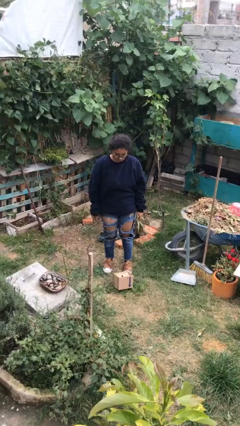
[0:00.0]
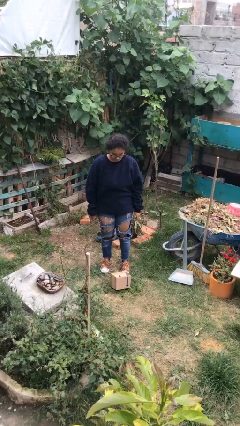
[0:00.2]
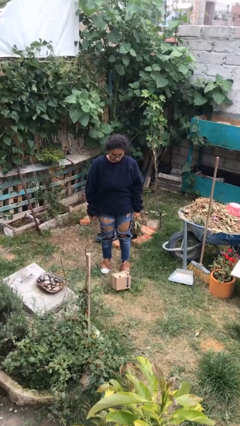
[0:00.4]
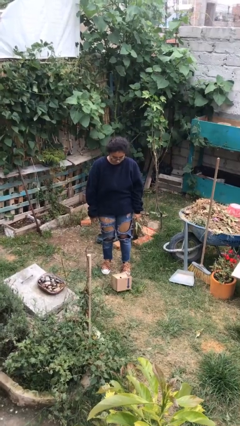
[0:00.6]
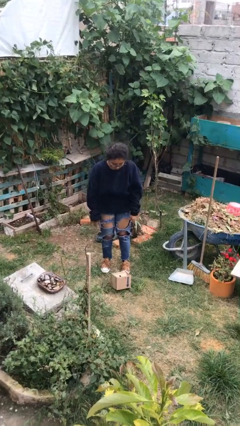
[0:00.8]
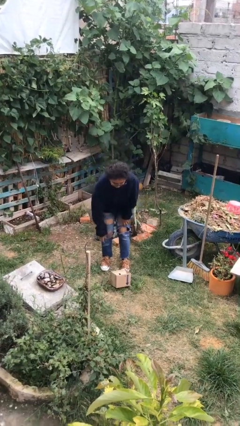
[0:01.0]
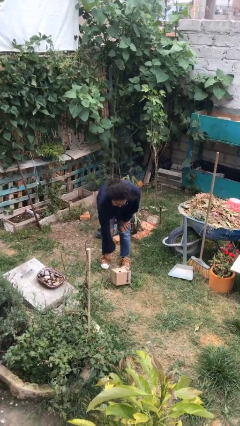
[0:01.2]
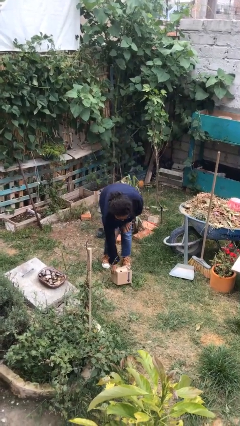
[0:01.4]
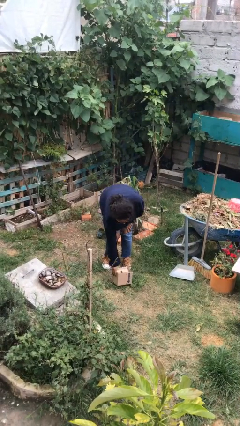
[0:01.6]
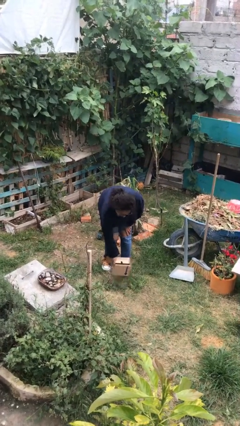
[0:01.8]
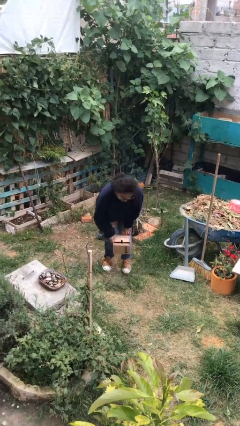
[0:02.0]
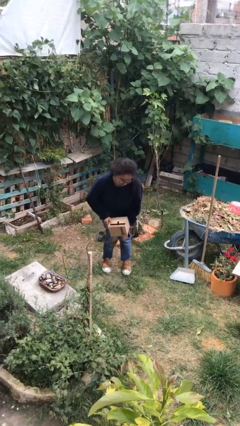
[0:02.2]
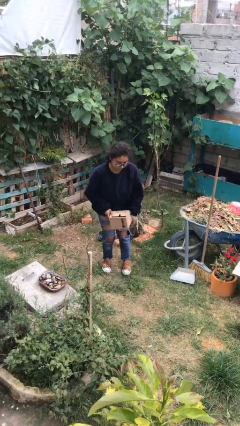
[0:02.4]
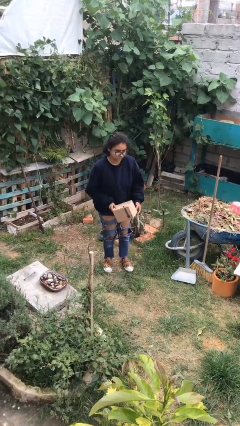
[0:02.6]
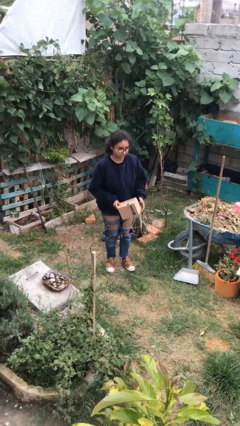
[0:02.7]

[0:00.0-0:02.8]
person picks up object from floor

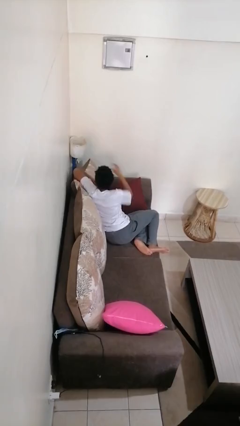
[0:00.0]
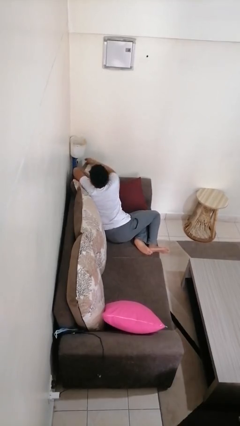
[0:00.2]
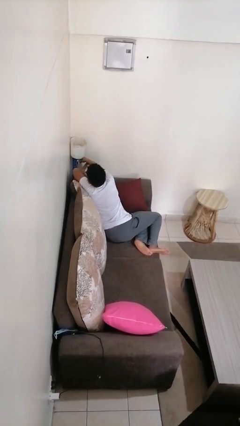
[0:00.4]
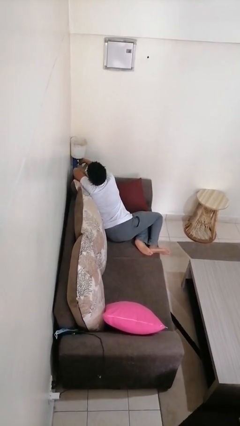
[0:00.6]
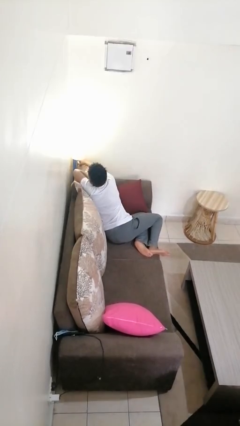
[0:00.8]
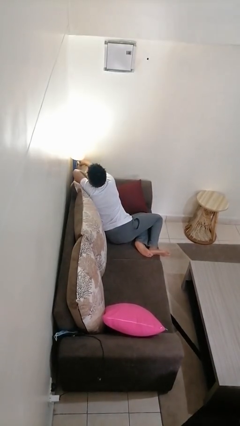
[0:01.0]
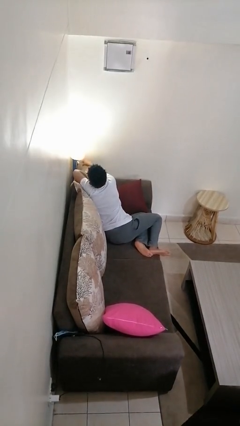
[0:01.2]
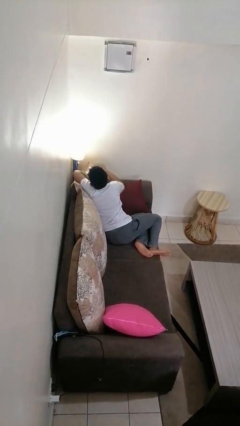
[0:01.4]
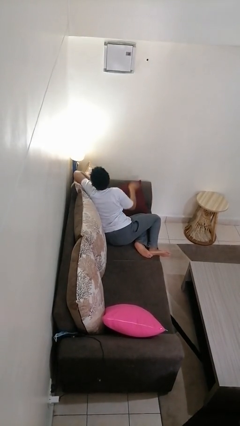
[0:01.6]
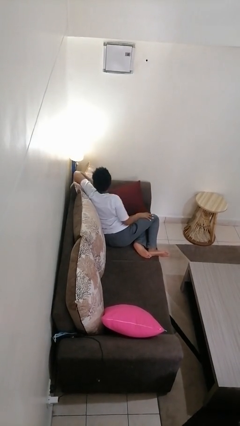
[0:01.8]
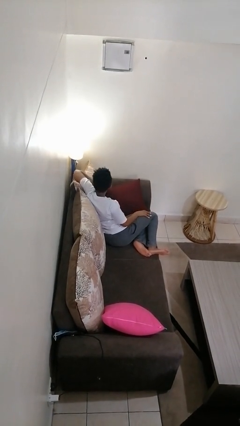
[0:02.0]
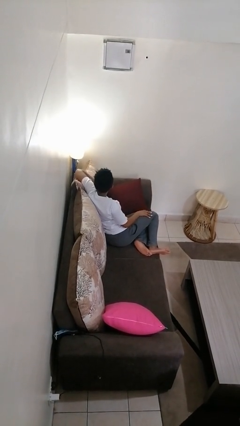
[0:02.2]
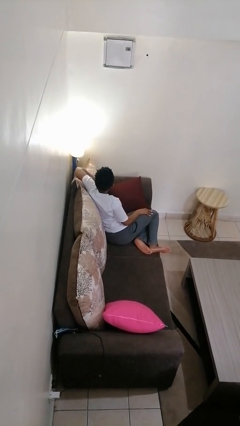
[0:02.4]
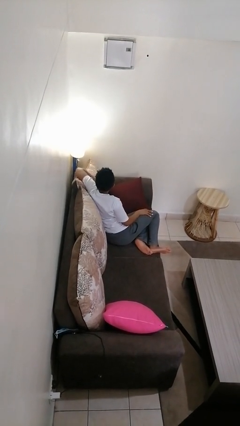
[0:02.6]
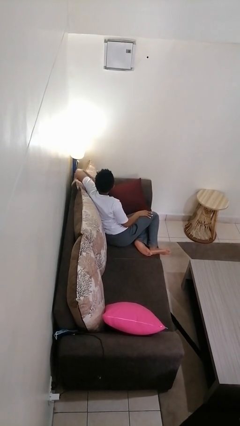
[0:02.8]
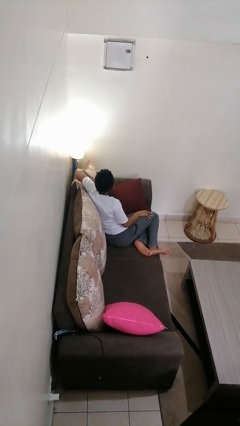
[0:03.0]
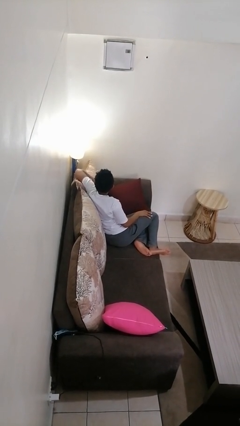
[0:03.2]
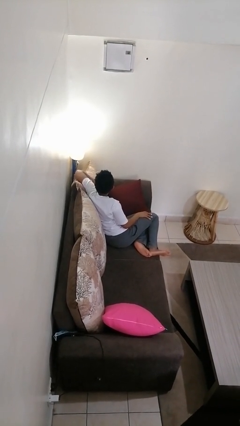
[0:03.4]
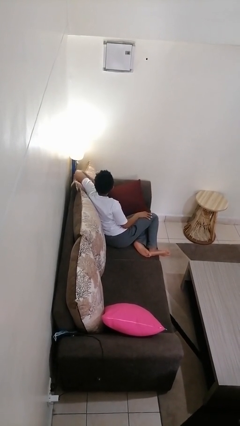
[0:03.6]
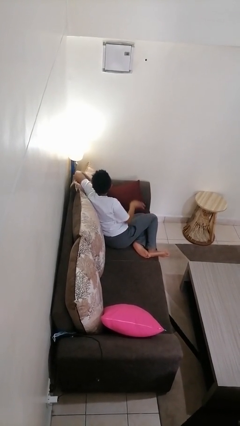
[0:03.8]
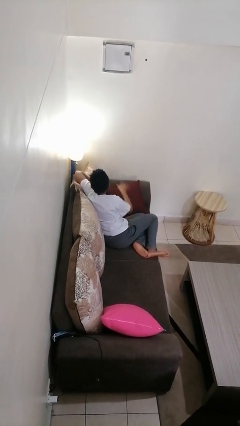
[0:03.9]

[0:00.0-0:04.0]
person turns on lamp

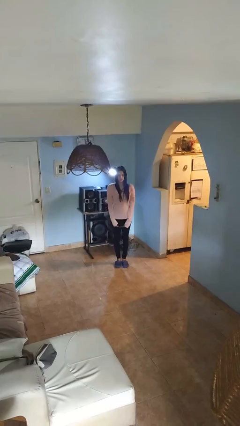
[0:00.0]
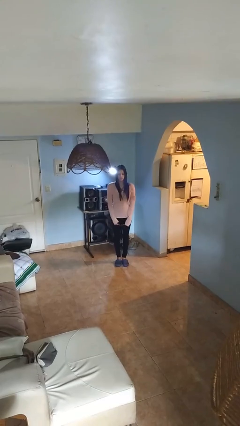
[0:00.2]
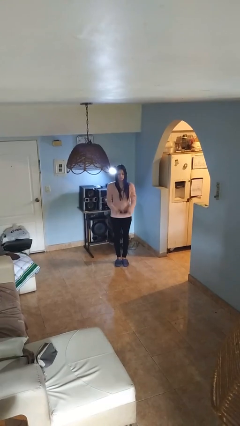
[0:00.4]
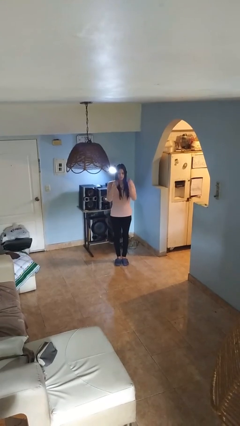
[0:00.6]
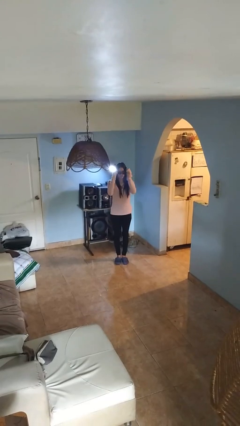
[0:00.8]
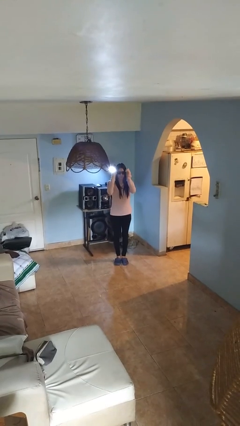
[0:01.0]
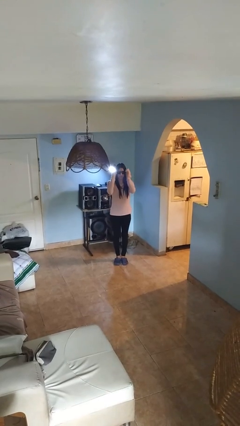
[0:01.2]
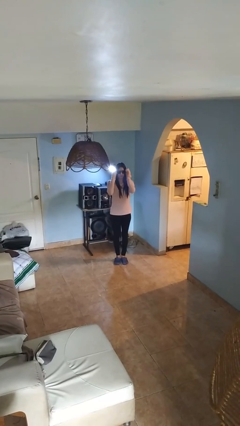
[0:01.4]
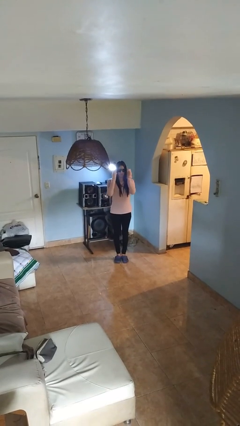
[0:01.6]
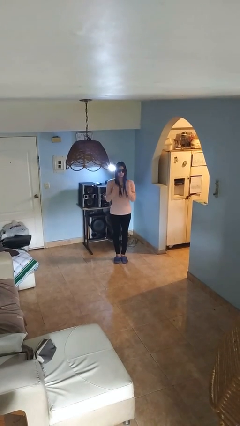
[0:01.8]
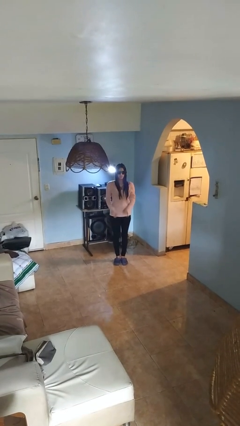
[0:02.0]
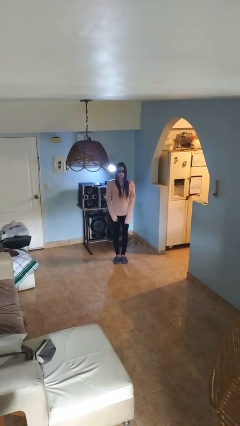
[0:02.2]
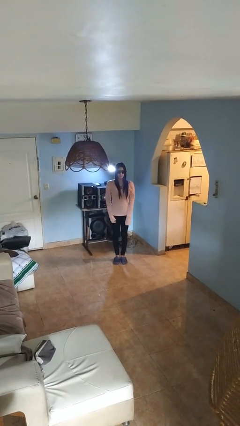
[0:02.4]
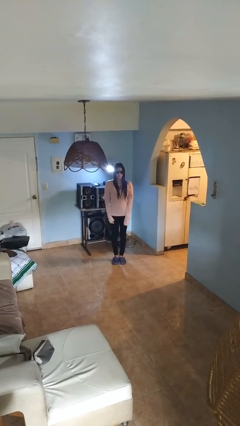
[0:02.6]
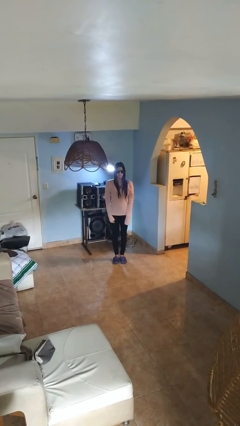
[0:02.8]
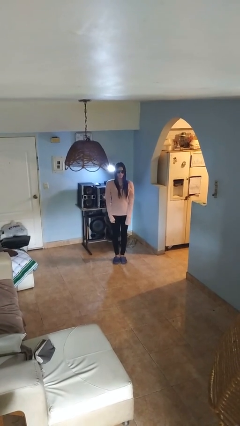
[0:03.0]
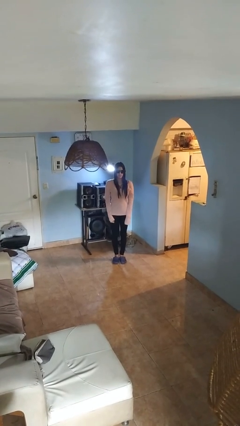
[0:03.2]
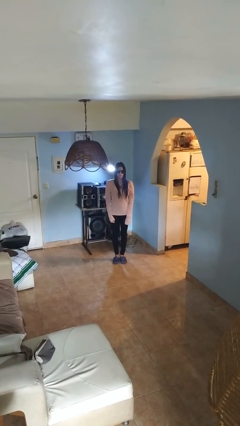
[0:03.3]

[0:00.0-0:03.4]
person puts on sunglasses

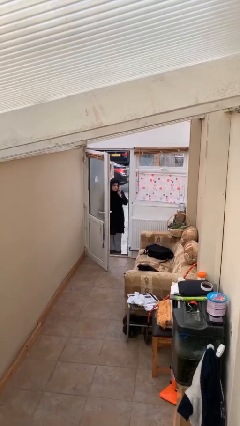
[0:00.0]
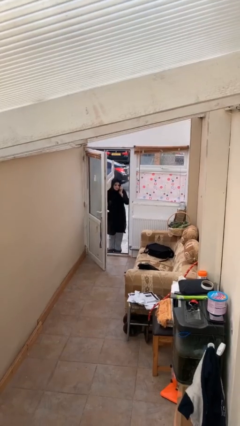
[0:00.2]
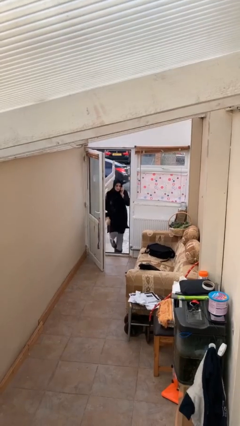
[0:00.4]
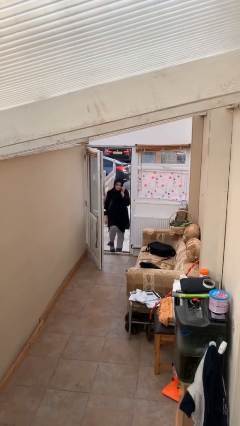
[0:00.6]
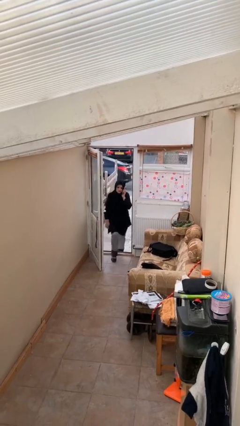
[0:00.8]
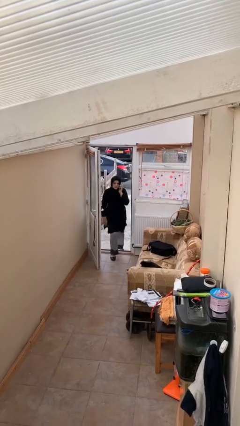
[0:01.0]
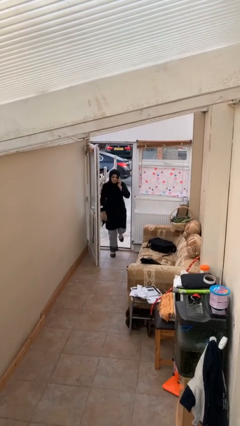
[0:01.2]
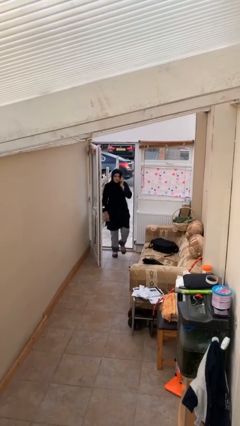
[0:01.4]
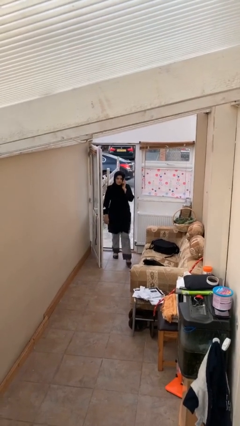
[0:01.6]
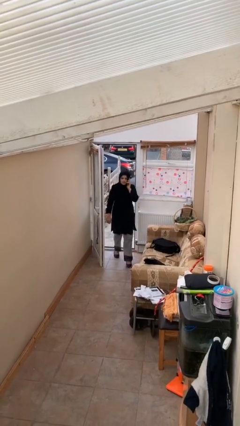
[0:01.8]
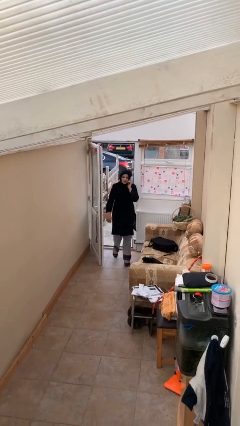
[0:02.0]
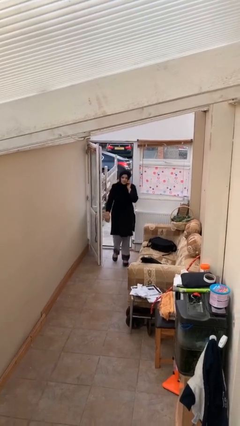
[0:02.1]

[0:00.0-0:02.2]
person enters scene through structure

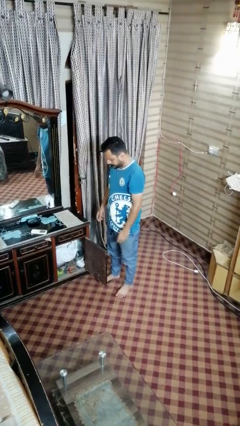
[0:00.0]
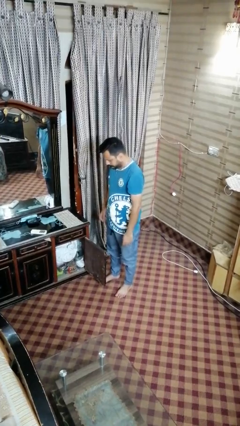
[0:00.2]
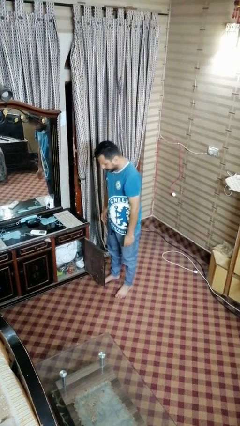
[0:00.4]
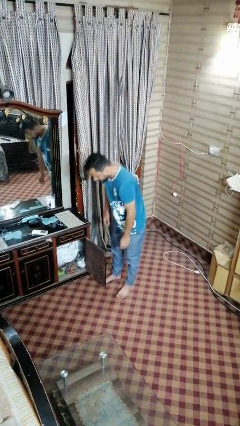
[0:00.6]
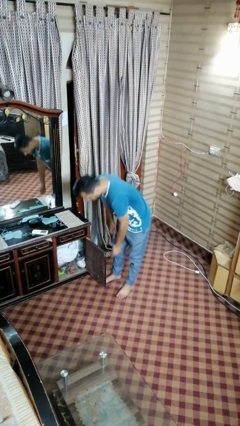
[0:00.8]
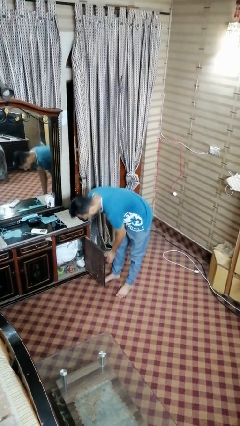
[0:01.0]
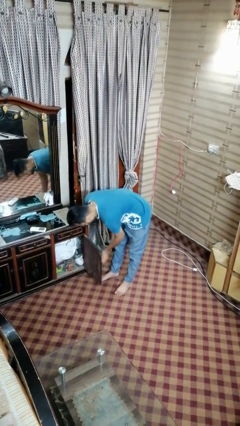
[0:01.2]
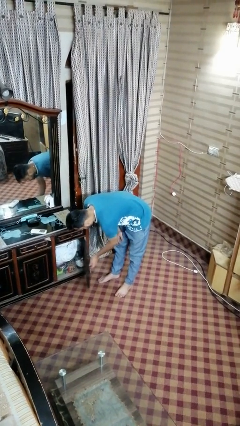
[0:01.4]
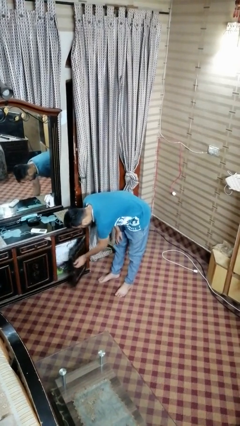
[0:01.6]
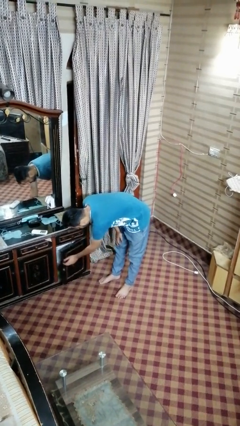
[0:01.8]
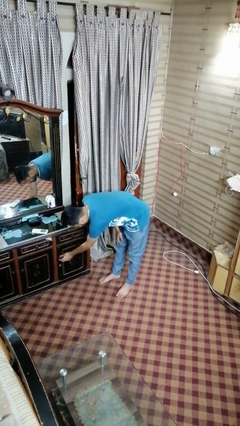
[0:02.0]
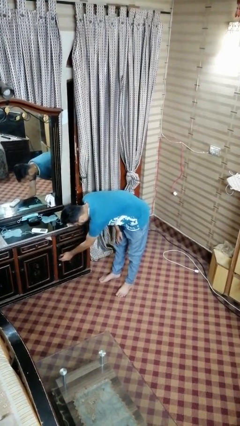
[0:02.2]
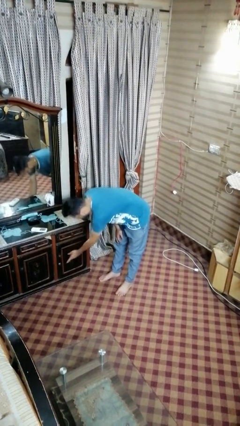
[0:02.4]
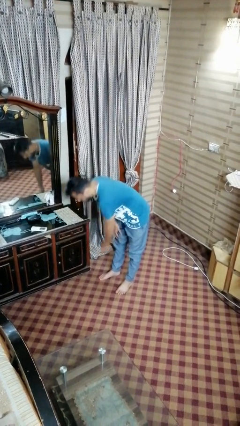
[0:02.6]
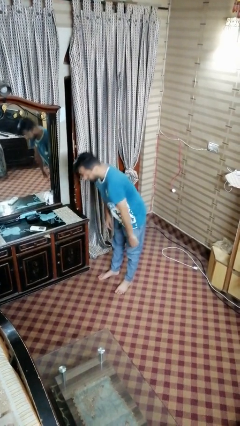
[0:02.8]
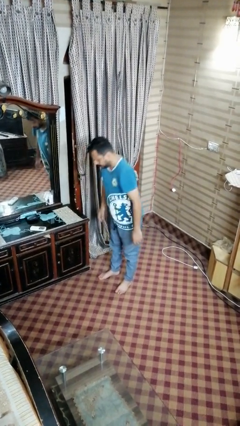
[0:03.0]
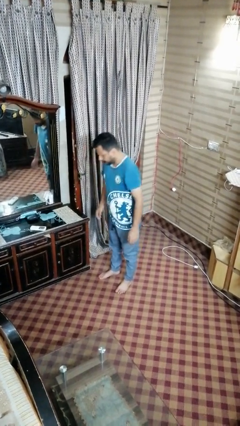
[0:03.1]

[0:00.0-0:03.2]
person closes dresser drawer

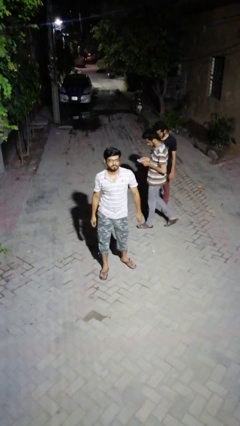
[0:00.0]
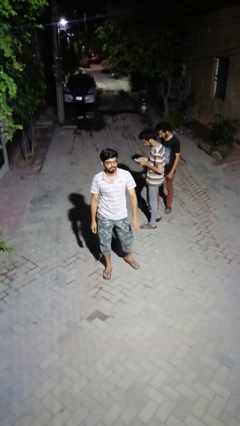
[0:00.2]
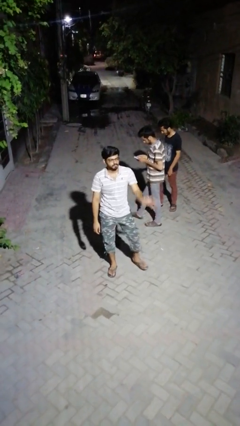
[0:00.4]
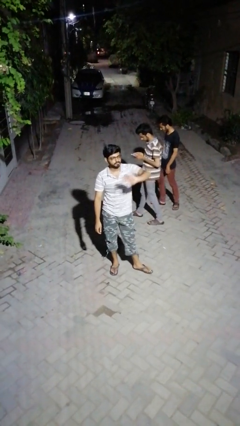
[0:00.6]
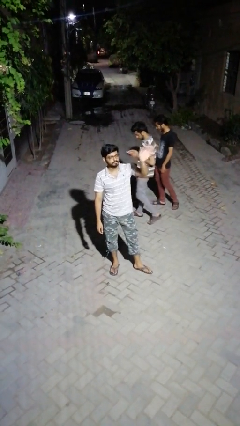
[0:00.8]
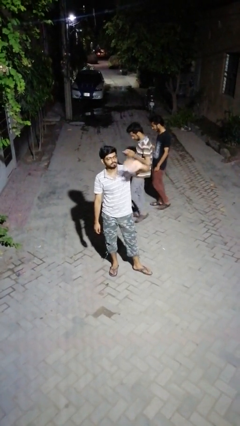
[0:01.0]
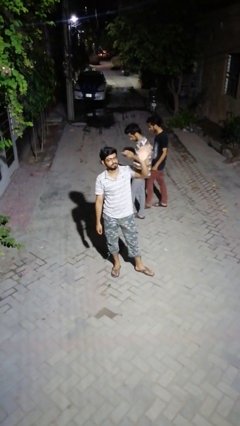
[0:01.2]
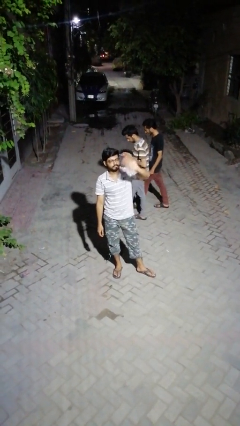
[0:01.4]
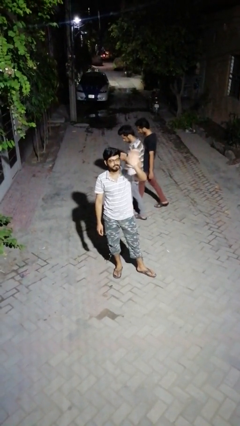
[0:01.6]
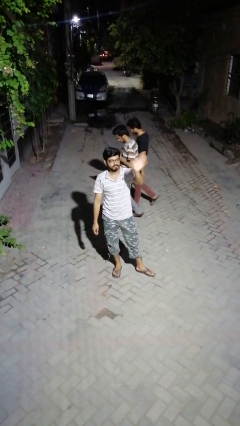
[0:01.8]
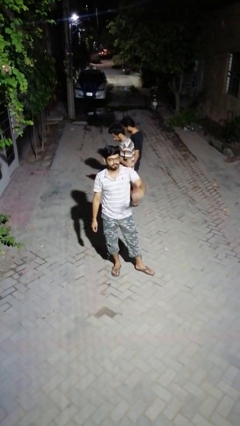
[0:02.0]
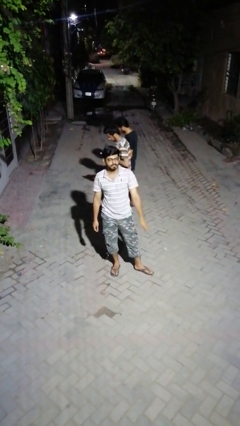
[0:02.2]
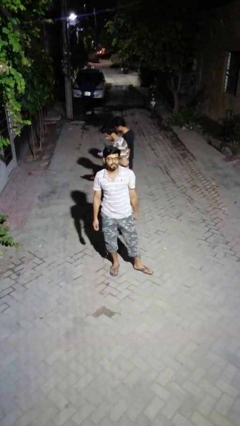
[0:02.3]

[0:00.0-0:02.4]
person waves at person
